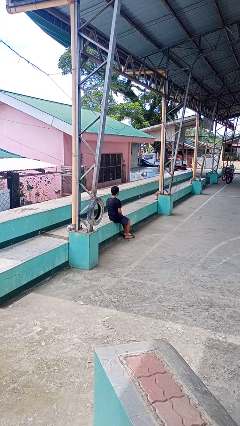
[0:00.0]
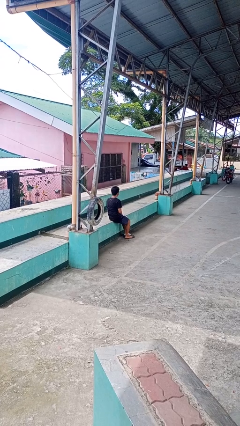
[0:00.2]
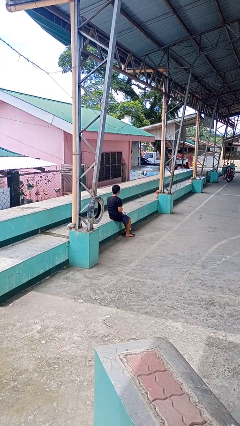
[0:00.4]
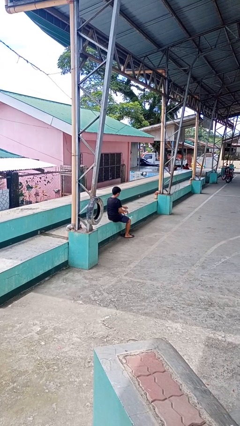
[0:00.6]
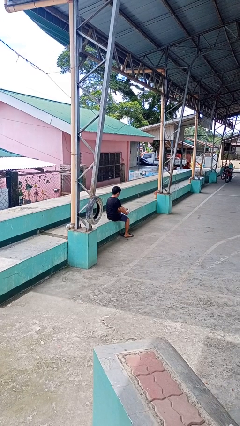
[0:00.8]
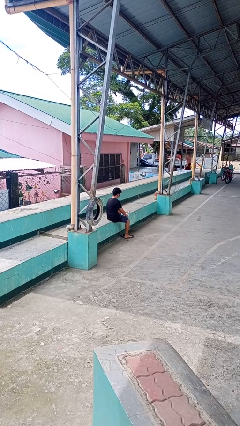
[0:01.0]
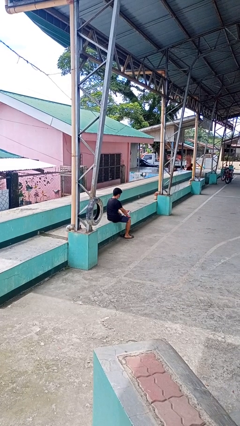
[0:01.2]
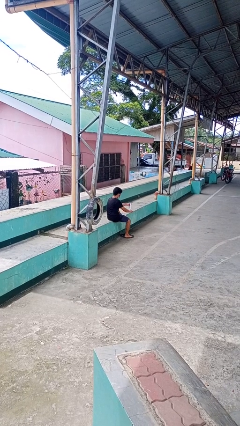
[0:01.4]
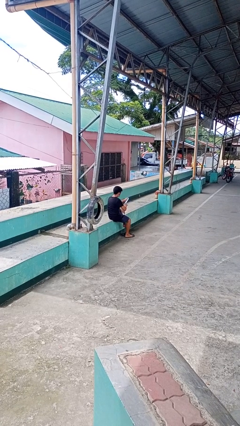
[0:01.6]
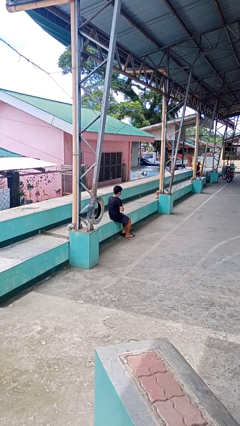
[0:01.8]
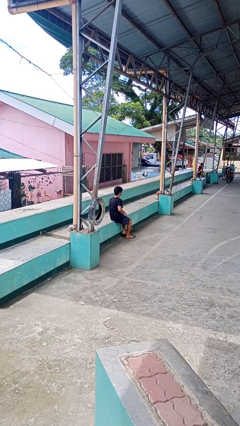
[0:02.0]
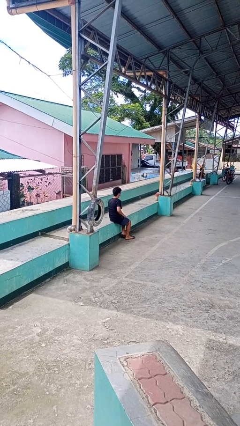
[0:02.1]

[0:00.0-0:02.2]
person takes off socks

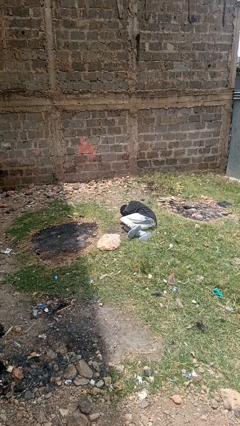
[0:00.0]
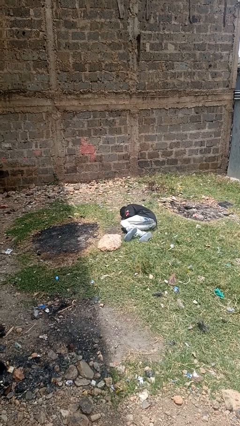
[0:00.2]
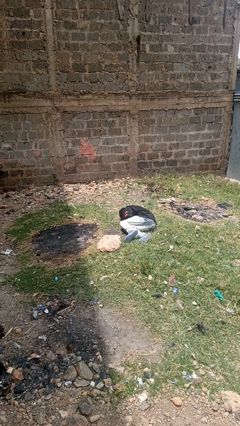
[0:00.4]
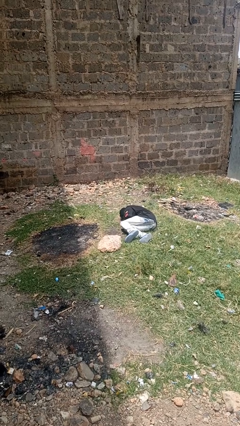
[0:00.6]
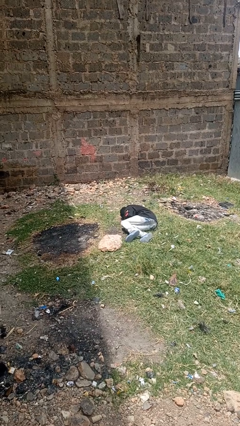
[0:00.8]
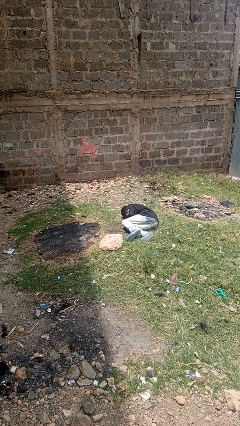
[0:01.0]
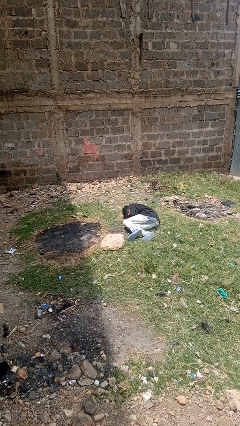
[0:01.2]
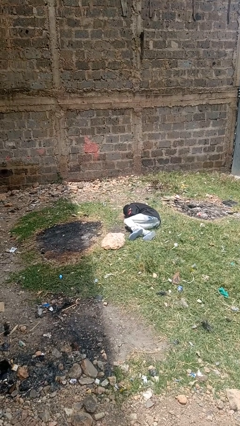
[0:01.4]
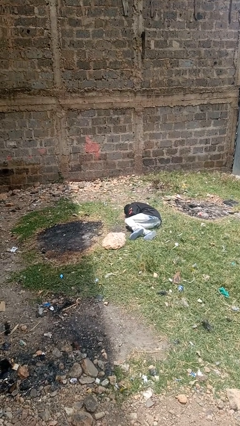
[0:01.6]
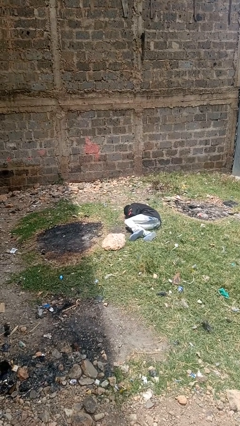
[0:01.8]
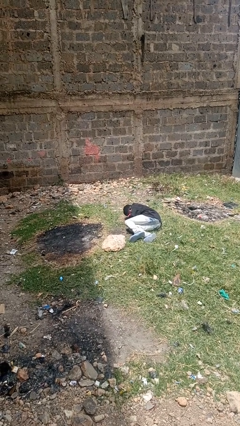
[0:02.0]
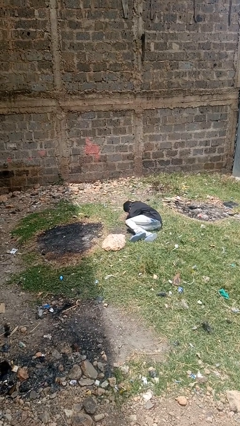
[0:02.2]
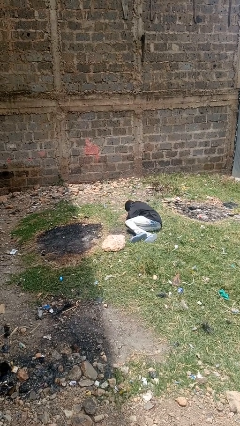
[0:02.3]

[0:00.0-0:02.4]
person lies down on floor

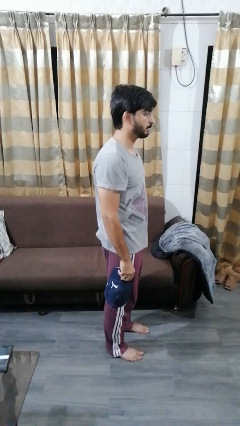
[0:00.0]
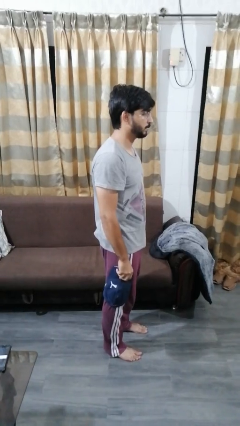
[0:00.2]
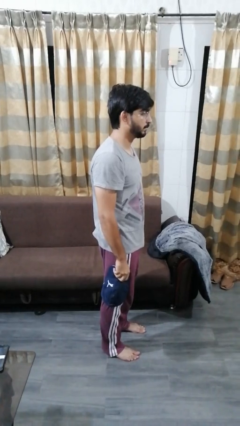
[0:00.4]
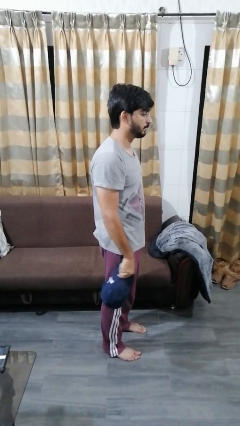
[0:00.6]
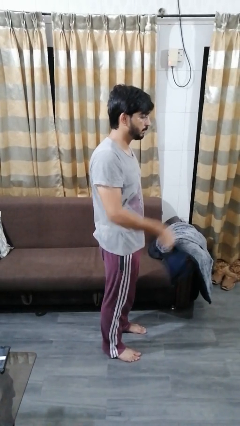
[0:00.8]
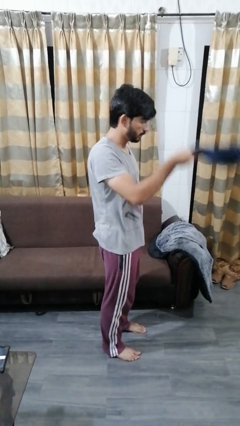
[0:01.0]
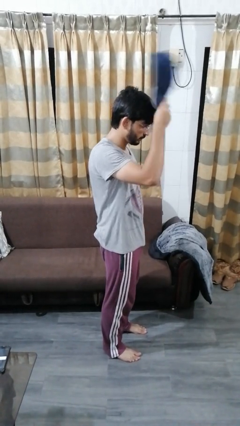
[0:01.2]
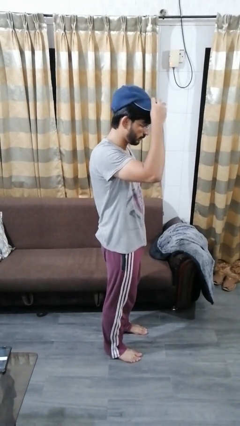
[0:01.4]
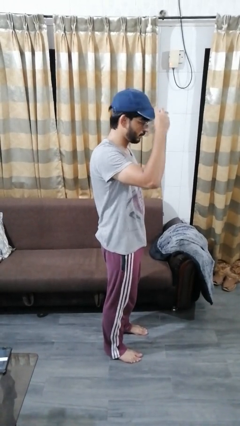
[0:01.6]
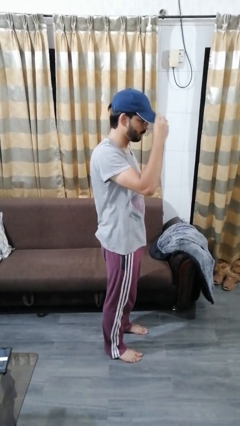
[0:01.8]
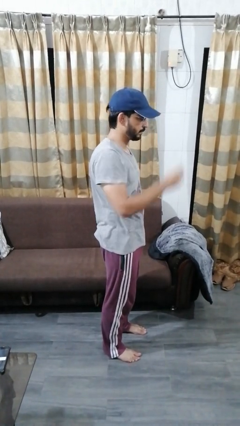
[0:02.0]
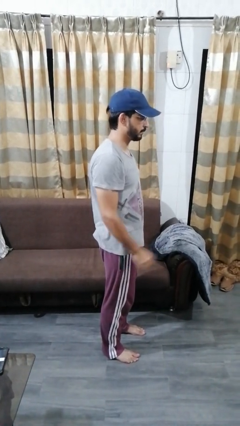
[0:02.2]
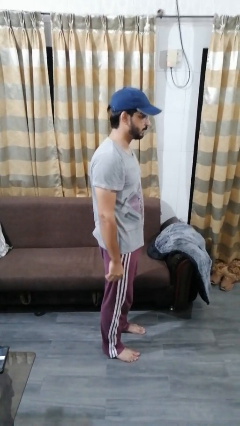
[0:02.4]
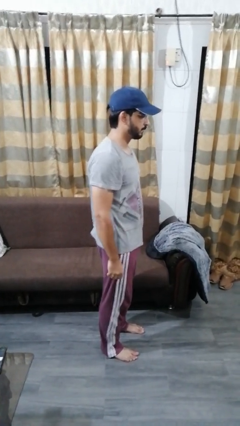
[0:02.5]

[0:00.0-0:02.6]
person puts on hat

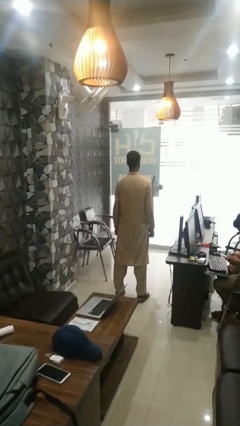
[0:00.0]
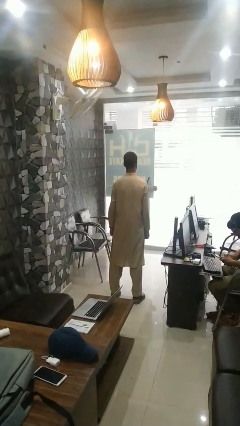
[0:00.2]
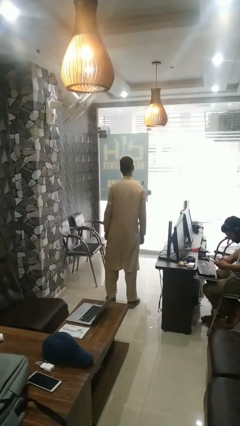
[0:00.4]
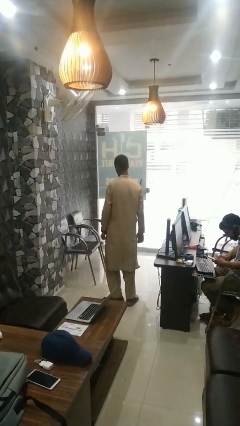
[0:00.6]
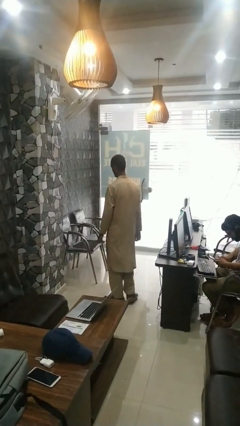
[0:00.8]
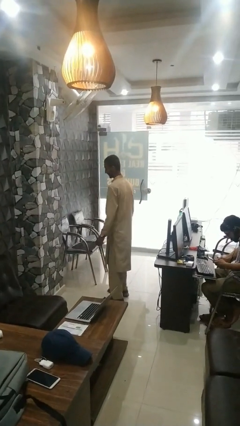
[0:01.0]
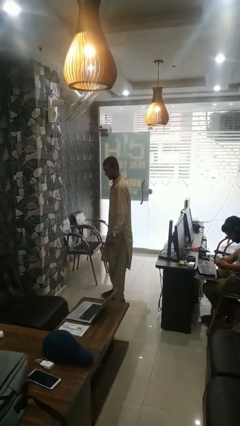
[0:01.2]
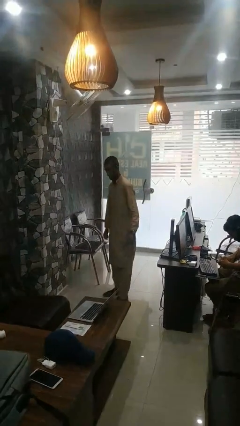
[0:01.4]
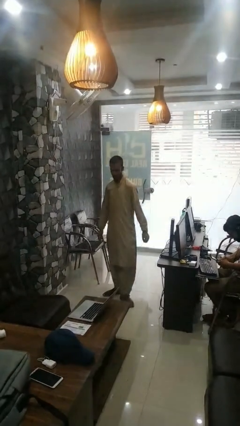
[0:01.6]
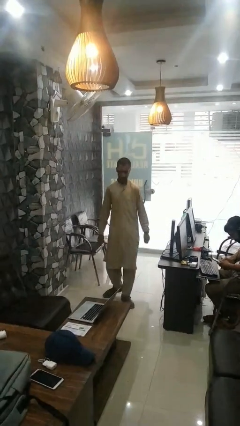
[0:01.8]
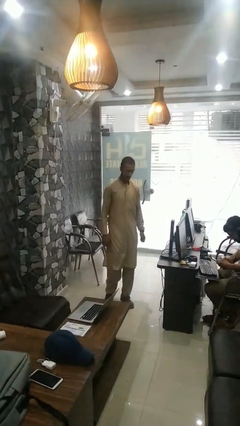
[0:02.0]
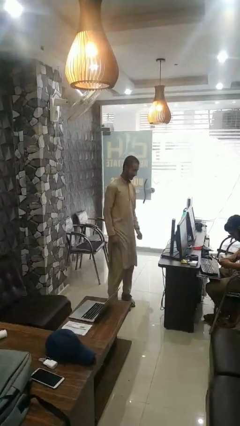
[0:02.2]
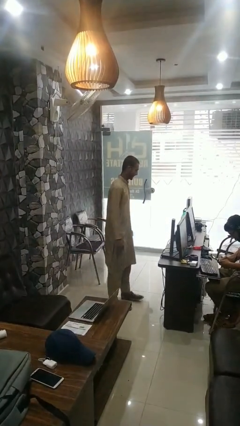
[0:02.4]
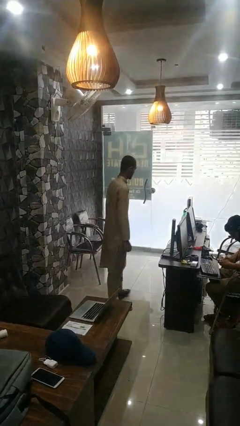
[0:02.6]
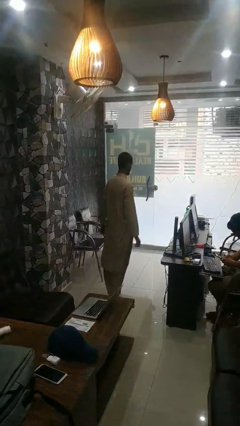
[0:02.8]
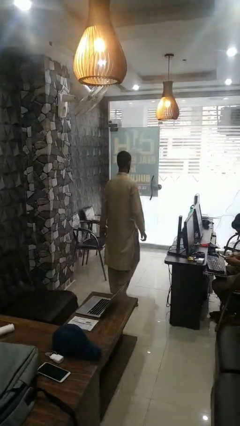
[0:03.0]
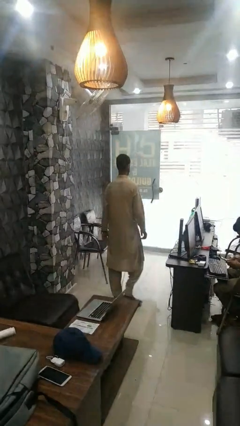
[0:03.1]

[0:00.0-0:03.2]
person twirls

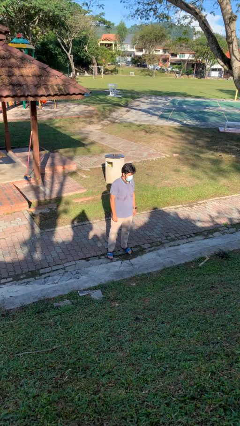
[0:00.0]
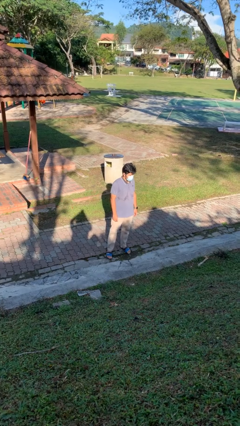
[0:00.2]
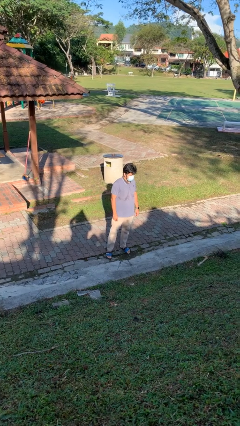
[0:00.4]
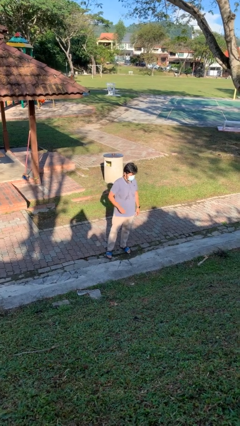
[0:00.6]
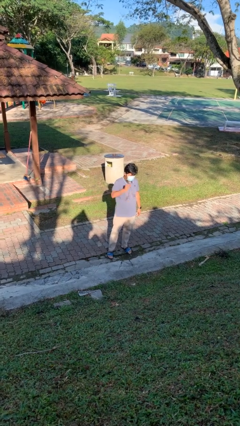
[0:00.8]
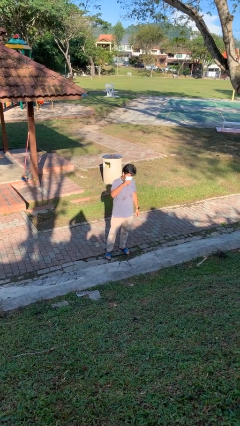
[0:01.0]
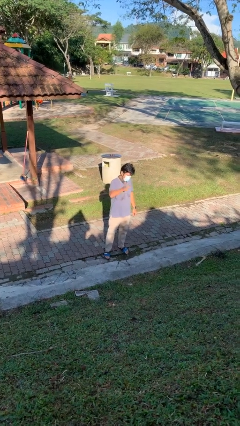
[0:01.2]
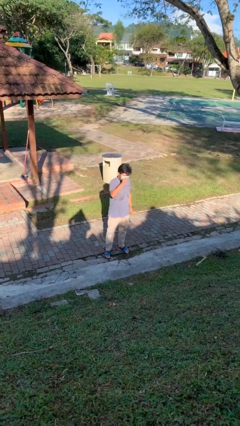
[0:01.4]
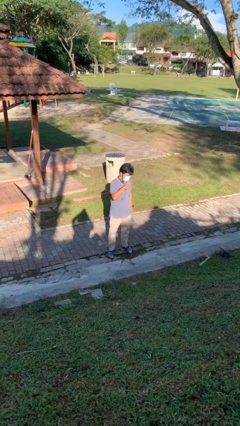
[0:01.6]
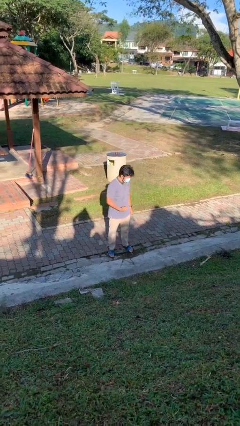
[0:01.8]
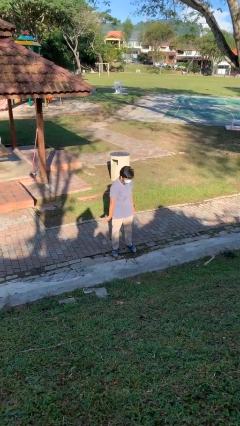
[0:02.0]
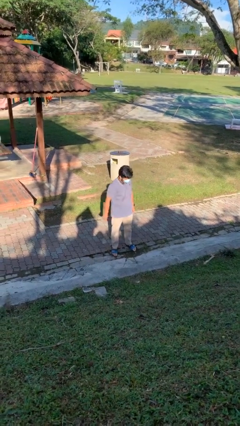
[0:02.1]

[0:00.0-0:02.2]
person snaps fingers

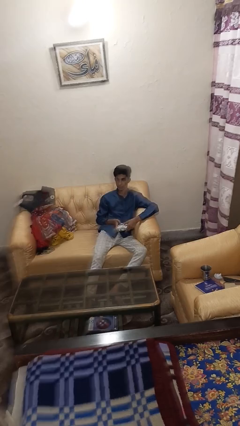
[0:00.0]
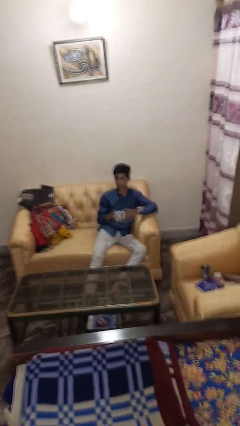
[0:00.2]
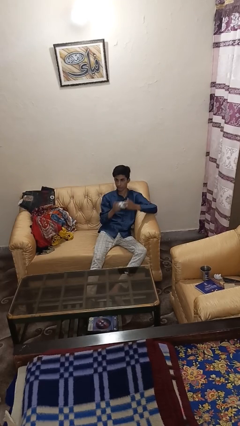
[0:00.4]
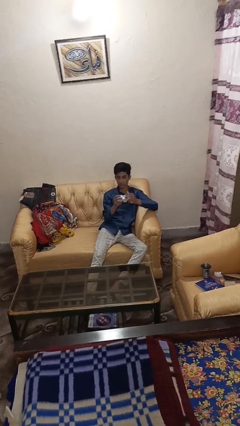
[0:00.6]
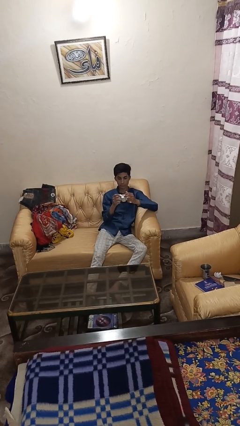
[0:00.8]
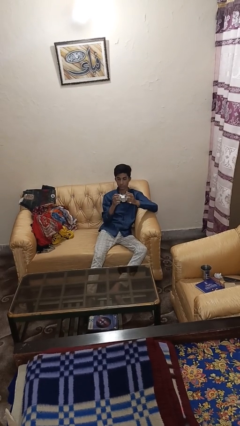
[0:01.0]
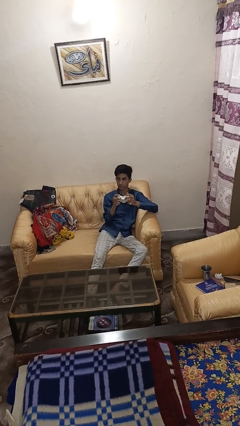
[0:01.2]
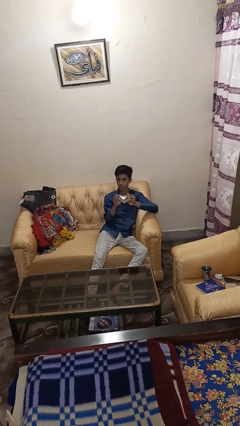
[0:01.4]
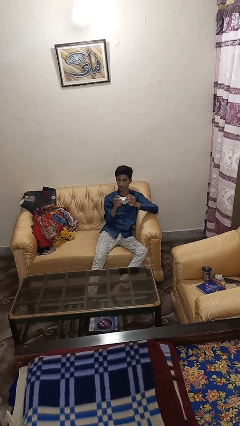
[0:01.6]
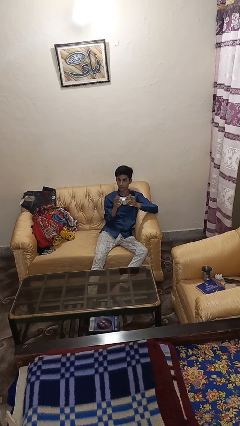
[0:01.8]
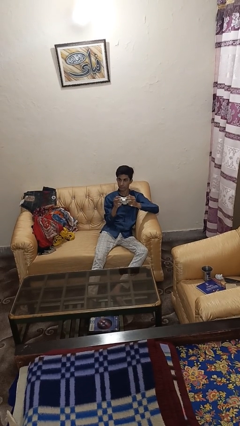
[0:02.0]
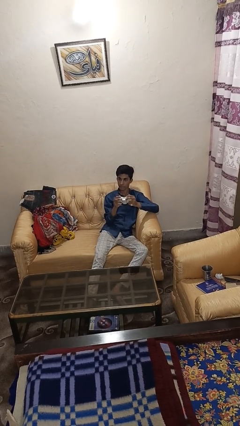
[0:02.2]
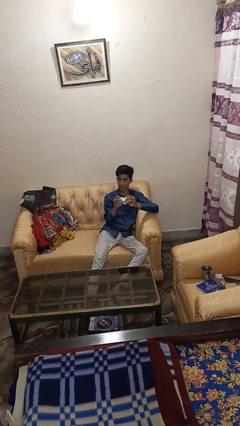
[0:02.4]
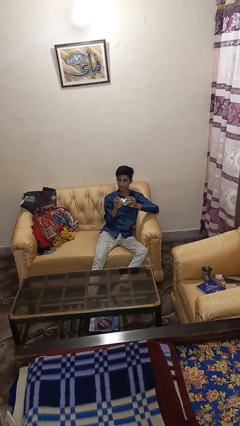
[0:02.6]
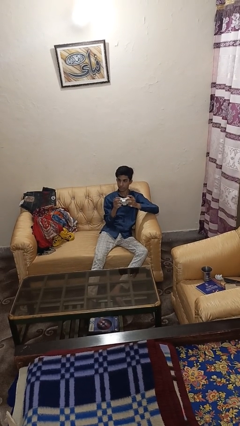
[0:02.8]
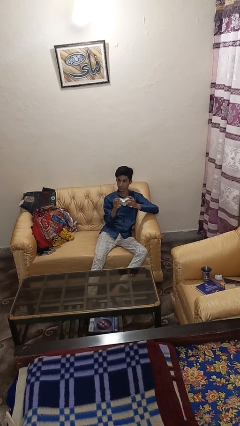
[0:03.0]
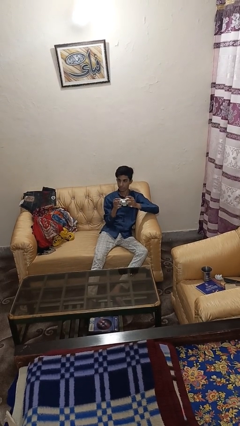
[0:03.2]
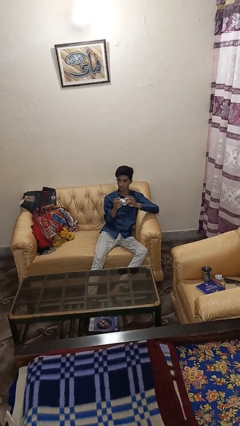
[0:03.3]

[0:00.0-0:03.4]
person interacts with handheld game

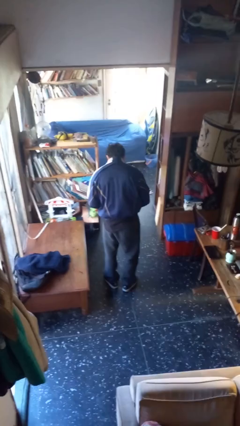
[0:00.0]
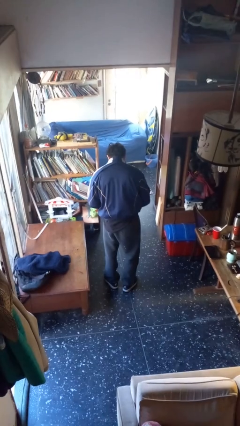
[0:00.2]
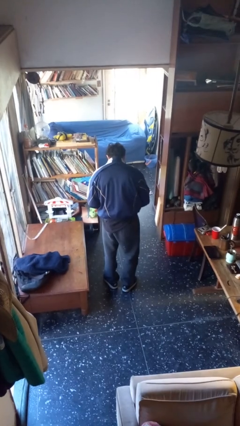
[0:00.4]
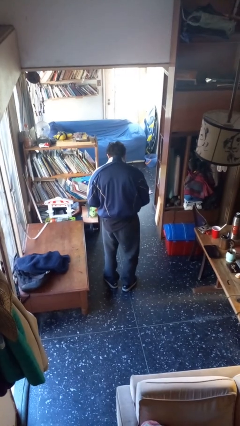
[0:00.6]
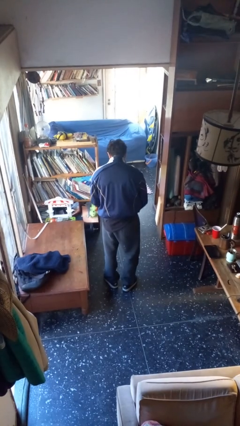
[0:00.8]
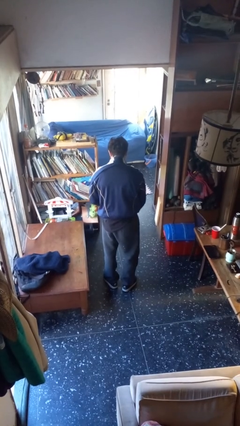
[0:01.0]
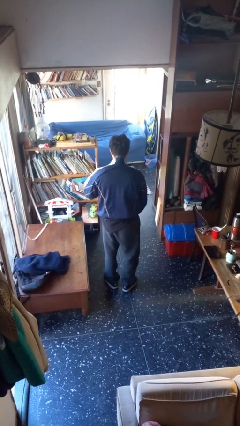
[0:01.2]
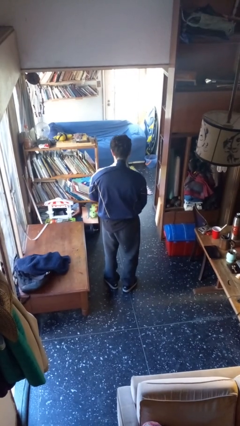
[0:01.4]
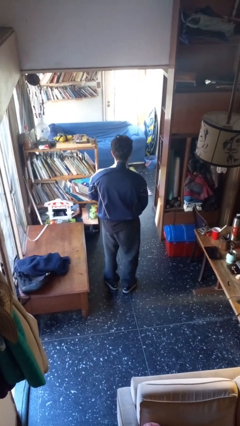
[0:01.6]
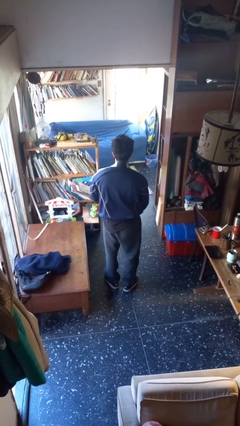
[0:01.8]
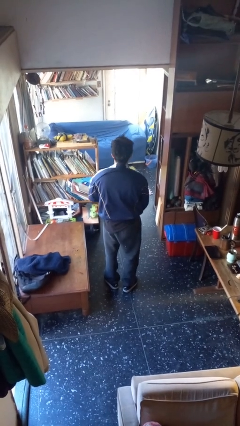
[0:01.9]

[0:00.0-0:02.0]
person zips up jacket
